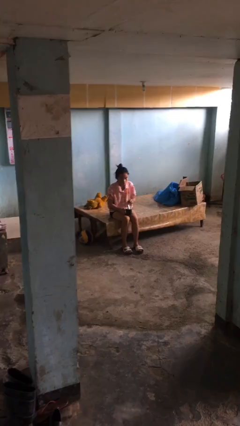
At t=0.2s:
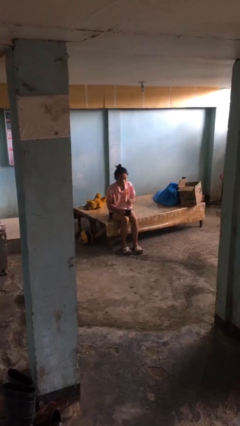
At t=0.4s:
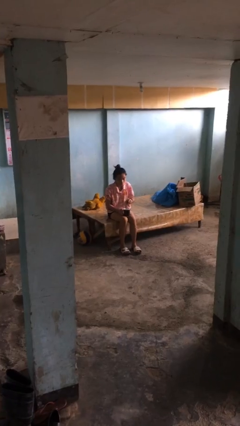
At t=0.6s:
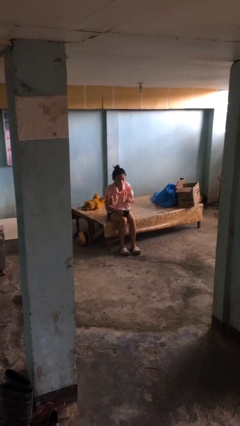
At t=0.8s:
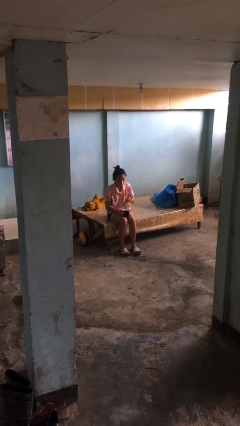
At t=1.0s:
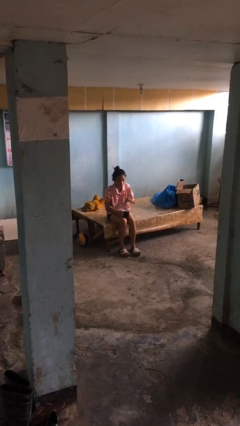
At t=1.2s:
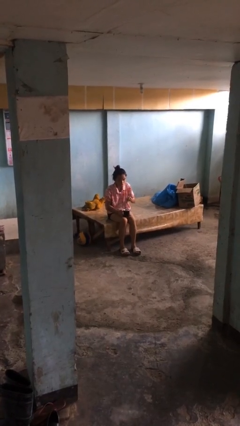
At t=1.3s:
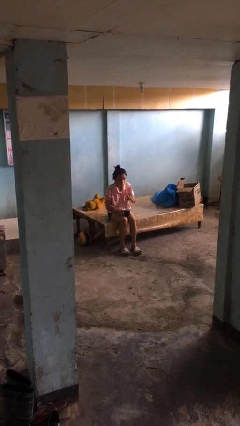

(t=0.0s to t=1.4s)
person stirs mug

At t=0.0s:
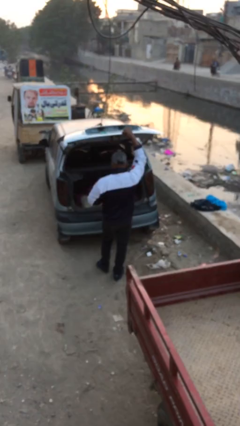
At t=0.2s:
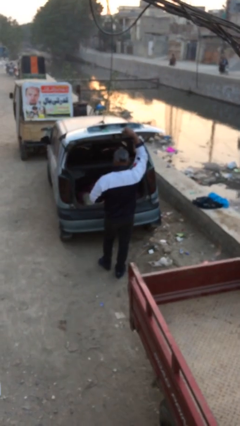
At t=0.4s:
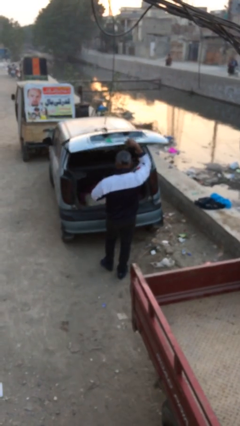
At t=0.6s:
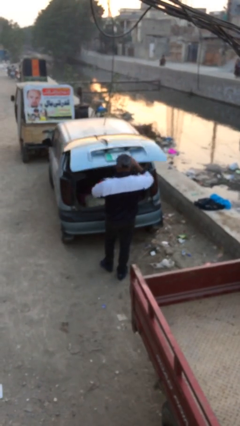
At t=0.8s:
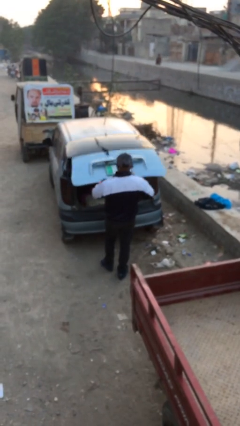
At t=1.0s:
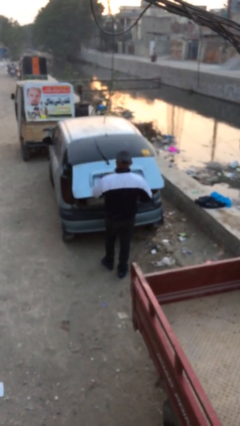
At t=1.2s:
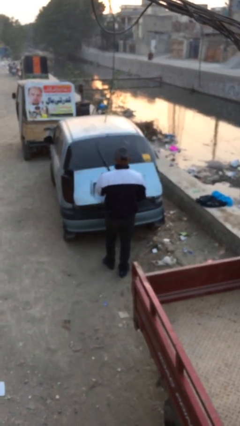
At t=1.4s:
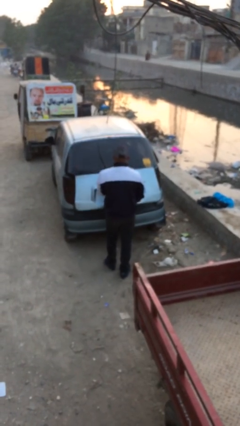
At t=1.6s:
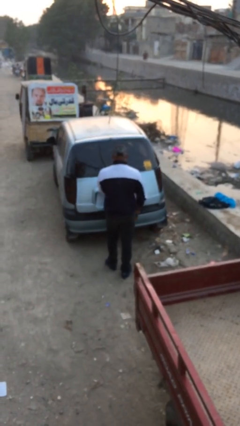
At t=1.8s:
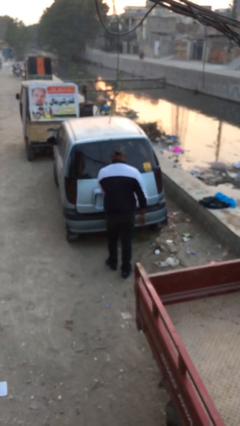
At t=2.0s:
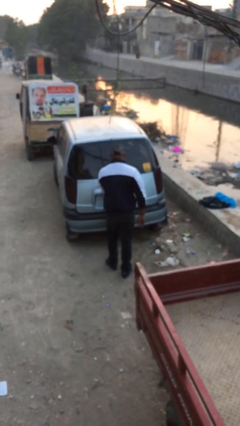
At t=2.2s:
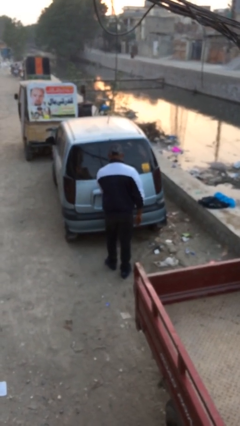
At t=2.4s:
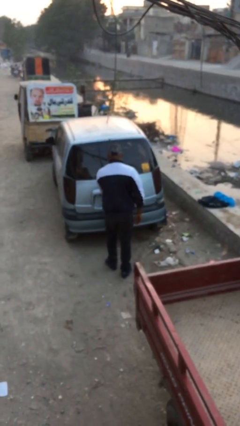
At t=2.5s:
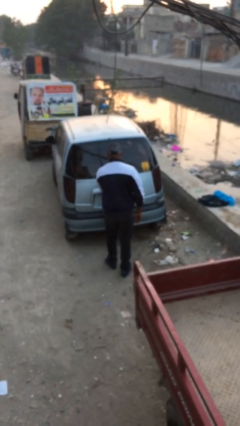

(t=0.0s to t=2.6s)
person closes car trunk

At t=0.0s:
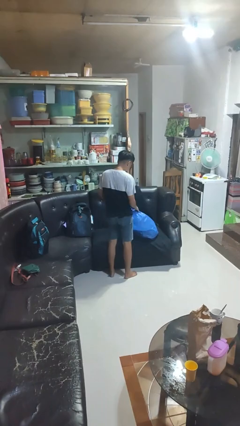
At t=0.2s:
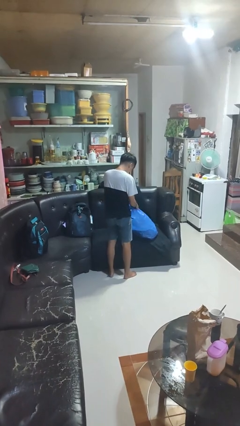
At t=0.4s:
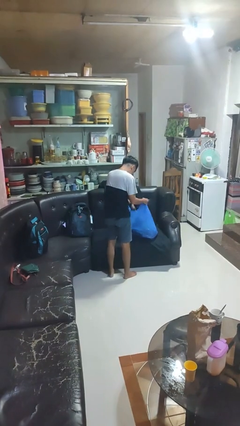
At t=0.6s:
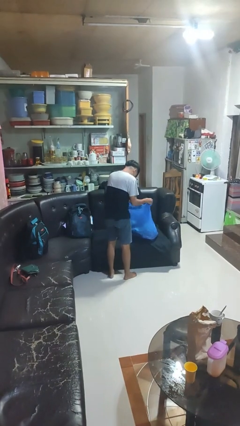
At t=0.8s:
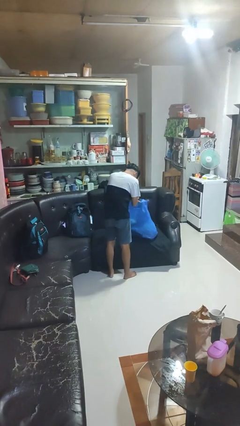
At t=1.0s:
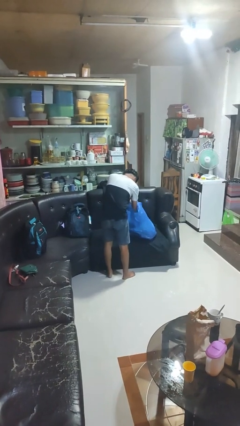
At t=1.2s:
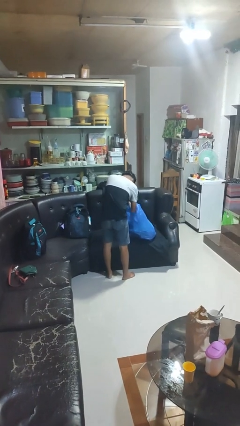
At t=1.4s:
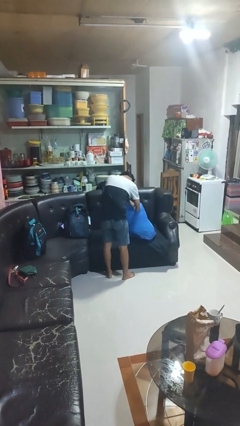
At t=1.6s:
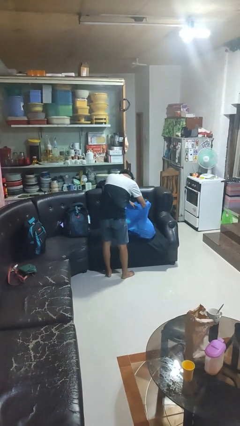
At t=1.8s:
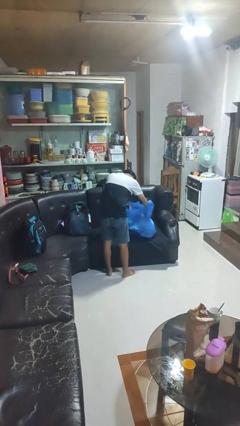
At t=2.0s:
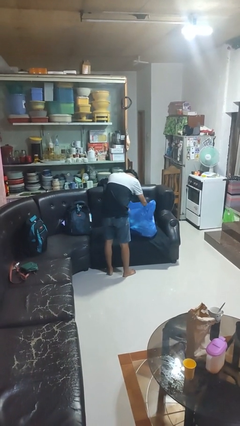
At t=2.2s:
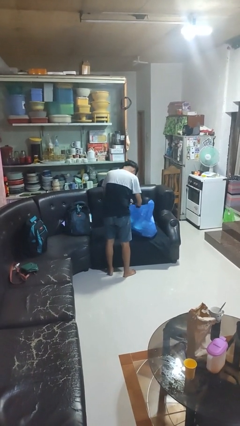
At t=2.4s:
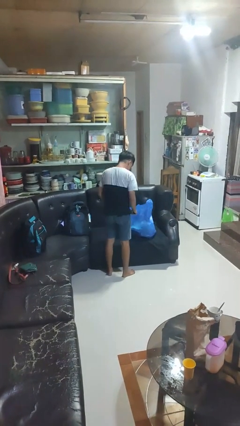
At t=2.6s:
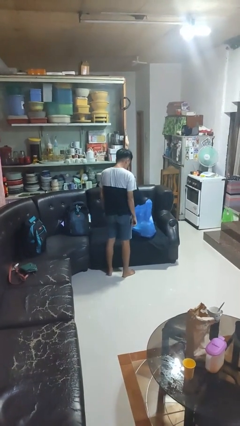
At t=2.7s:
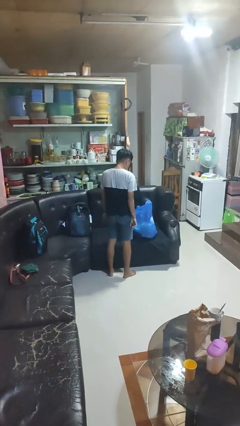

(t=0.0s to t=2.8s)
person searches in bag

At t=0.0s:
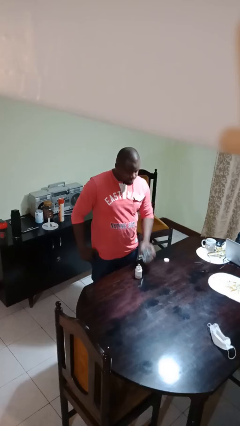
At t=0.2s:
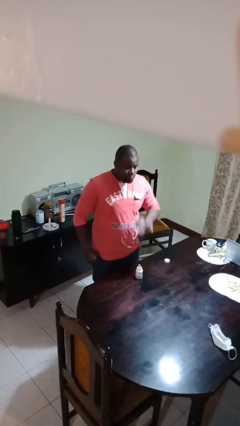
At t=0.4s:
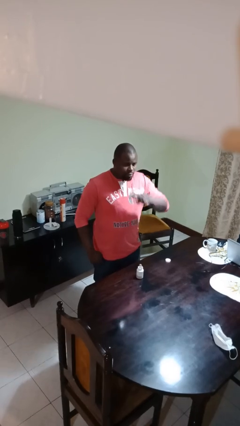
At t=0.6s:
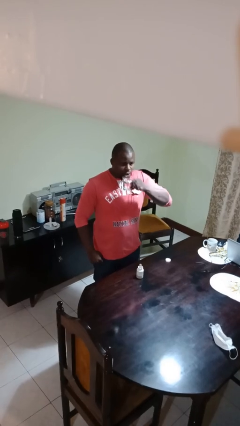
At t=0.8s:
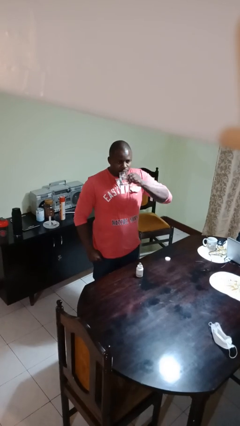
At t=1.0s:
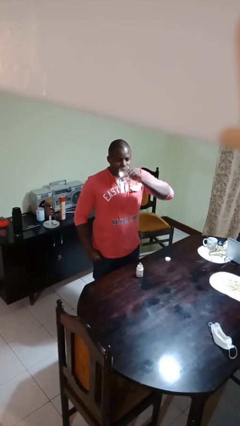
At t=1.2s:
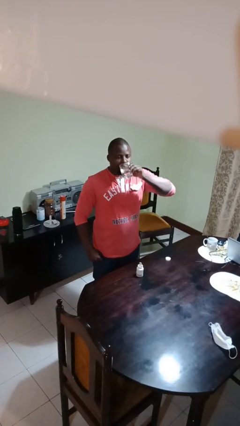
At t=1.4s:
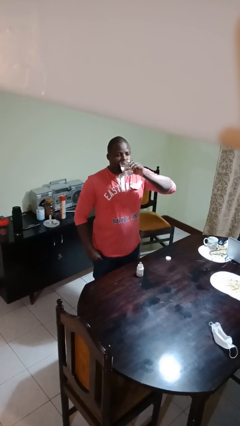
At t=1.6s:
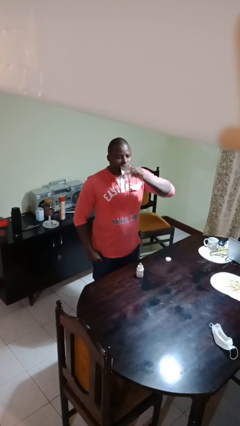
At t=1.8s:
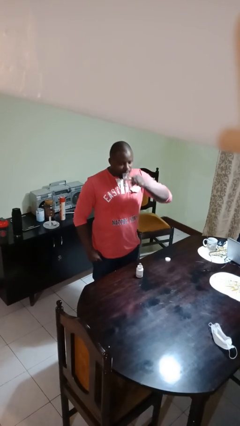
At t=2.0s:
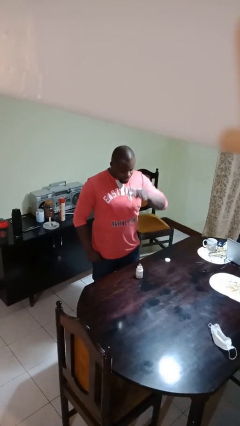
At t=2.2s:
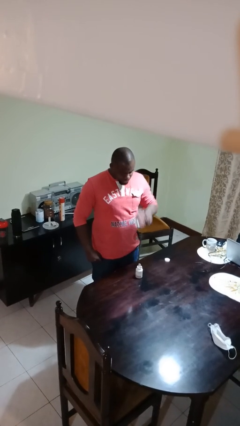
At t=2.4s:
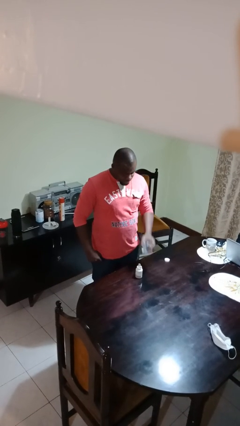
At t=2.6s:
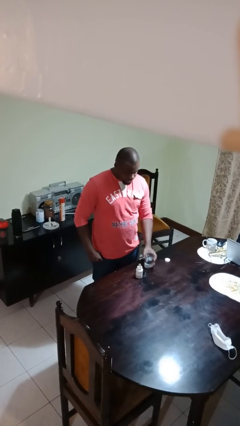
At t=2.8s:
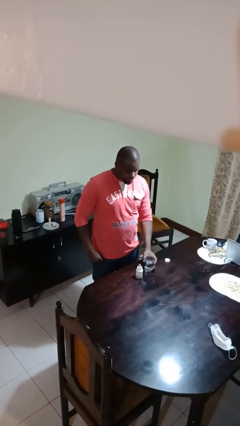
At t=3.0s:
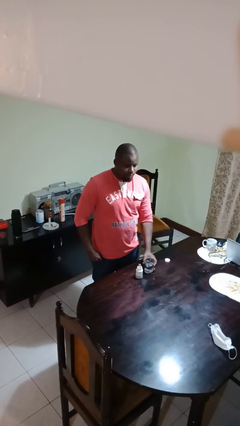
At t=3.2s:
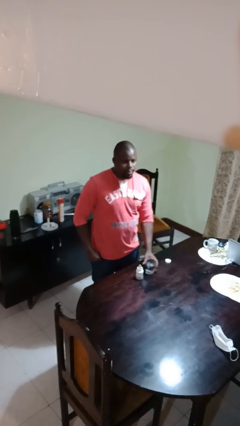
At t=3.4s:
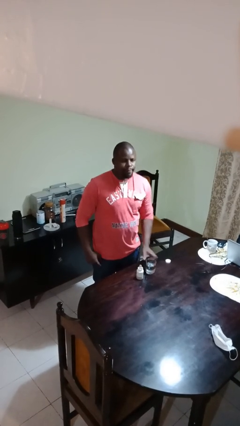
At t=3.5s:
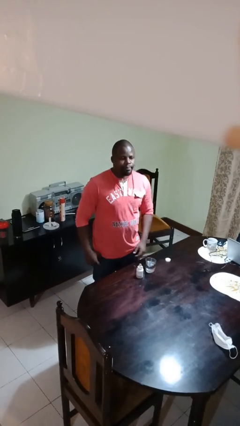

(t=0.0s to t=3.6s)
person drinks from cup

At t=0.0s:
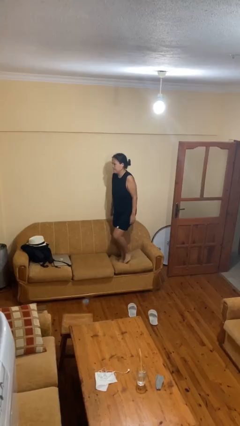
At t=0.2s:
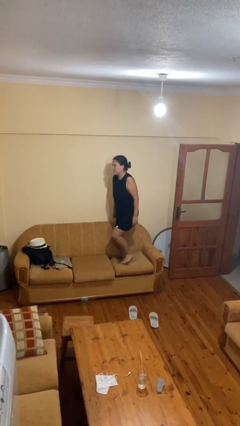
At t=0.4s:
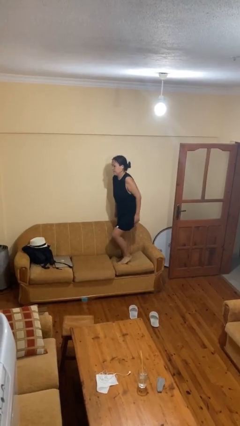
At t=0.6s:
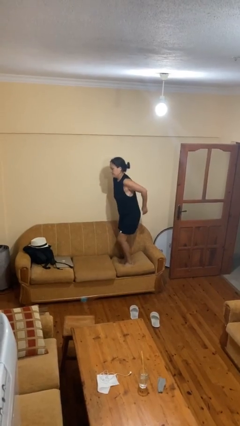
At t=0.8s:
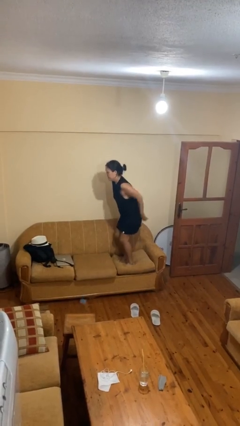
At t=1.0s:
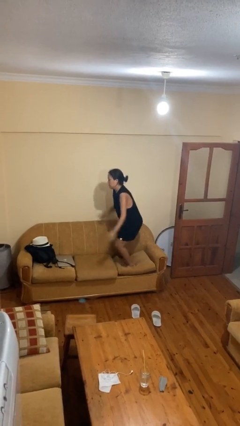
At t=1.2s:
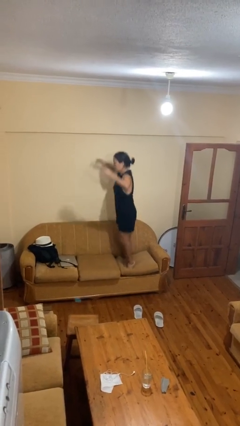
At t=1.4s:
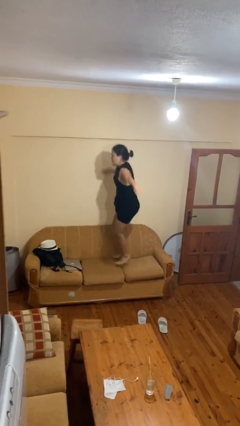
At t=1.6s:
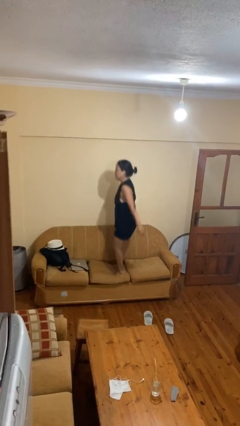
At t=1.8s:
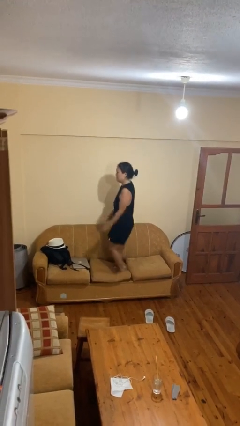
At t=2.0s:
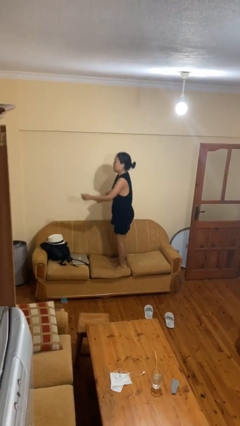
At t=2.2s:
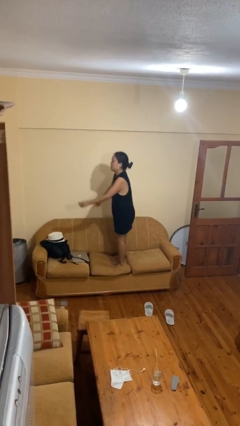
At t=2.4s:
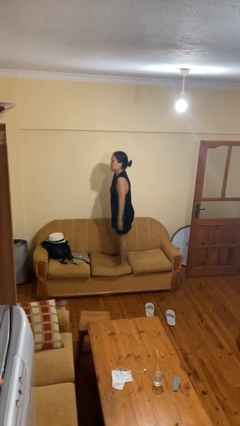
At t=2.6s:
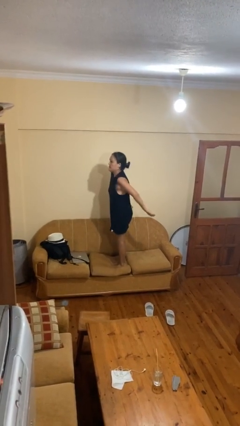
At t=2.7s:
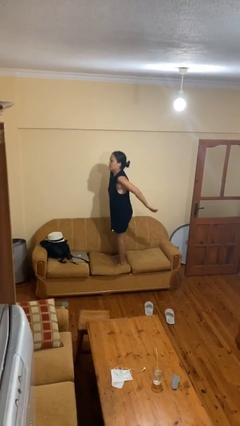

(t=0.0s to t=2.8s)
person jumps on couch

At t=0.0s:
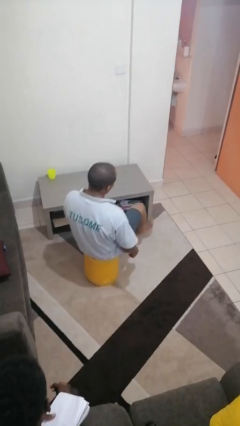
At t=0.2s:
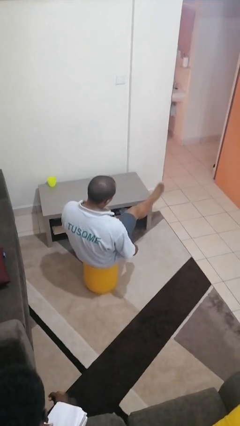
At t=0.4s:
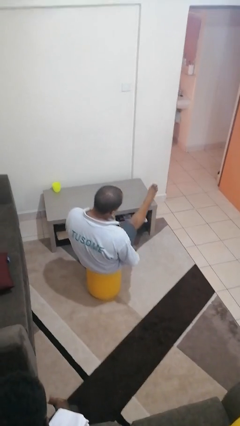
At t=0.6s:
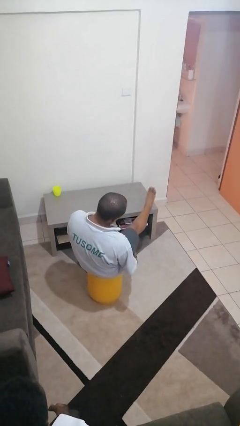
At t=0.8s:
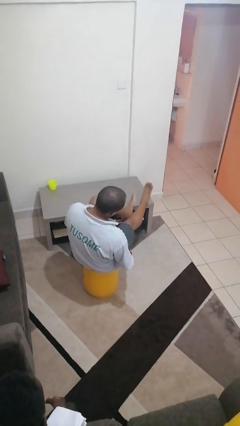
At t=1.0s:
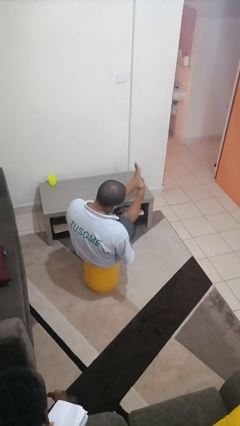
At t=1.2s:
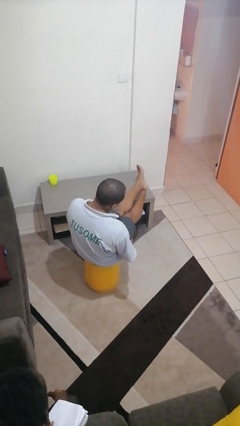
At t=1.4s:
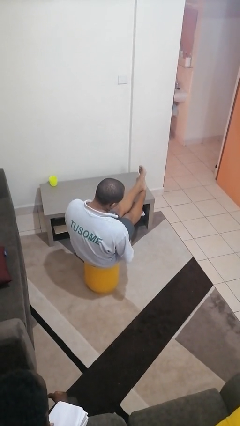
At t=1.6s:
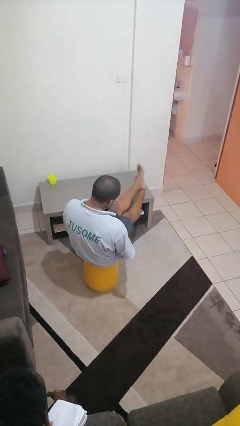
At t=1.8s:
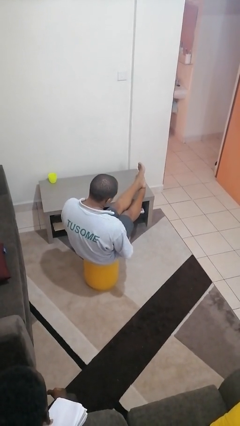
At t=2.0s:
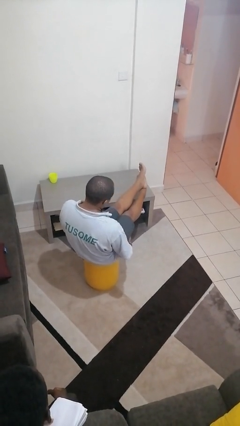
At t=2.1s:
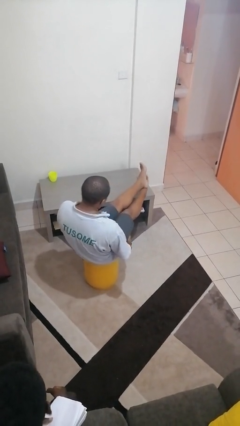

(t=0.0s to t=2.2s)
person puts feet up

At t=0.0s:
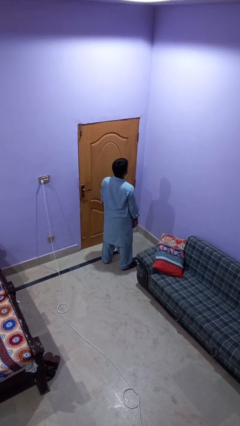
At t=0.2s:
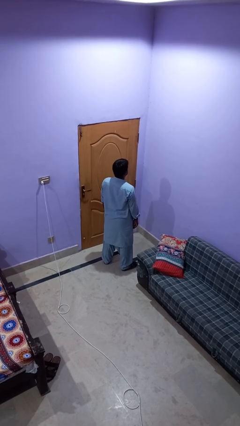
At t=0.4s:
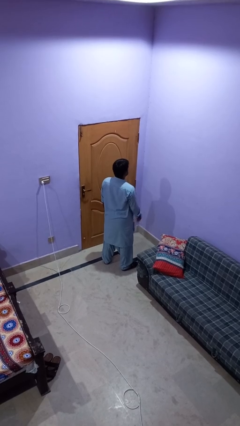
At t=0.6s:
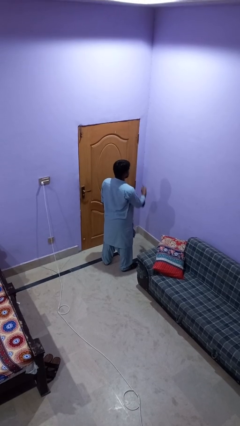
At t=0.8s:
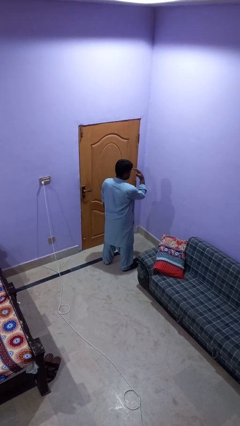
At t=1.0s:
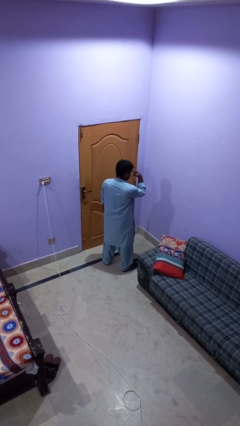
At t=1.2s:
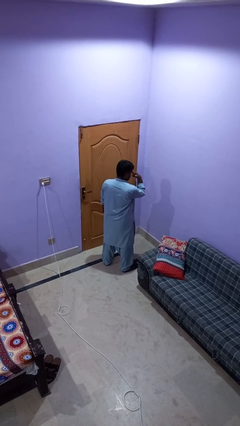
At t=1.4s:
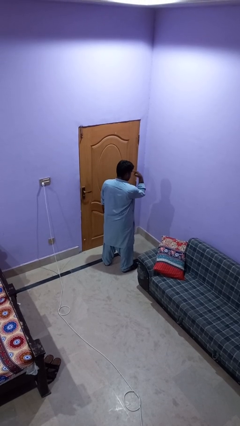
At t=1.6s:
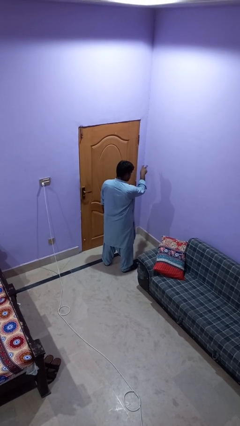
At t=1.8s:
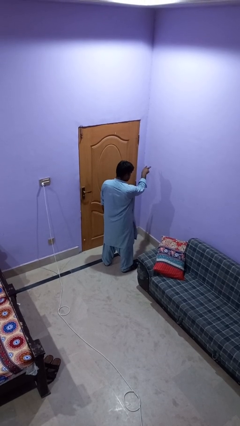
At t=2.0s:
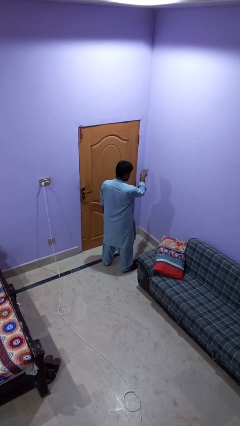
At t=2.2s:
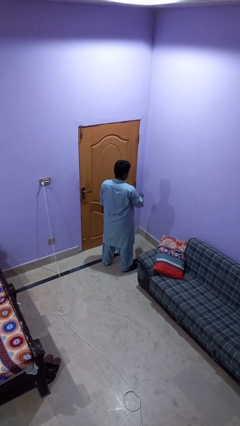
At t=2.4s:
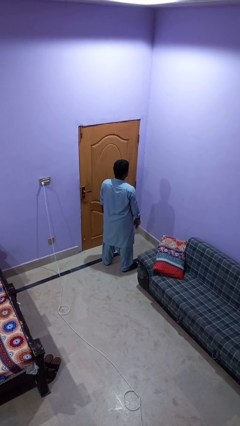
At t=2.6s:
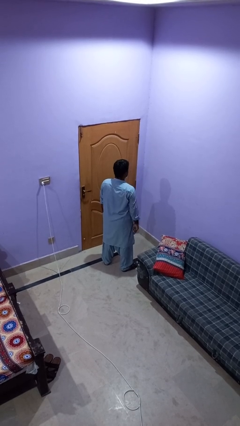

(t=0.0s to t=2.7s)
person gestures watch closely
